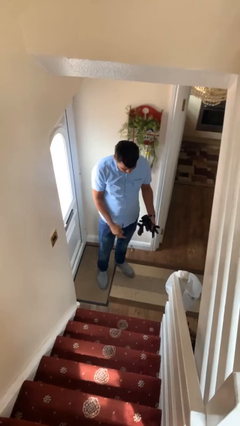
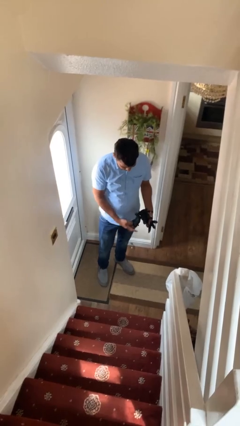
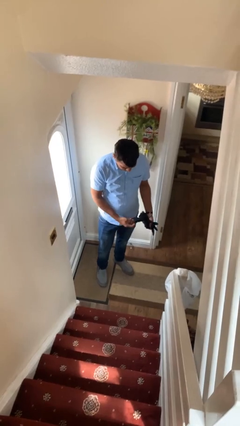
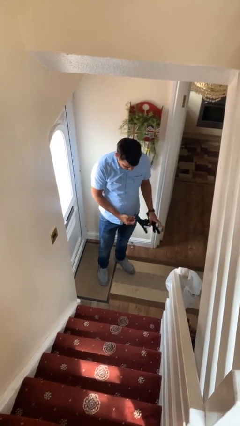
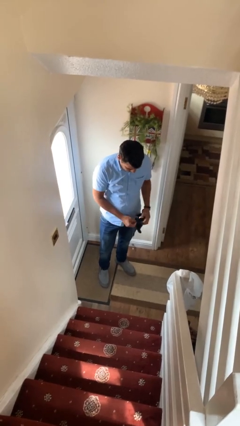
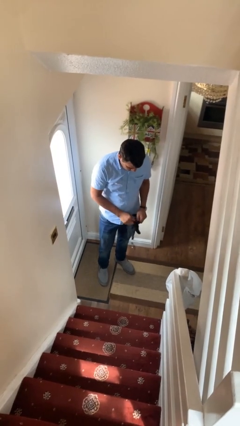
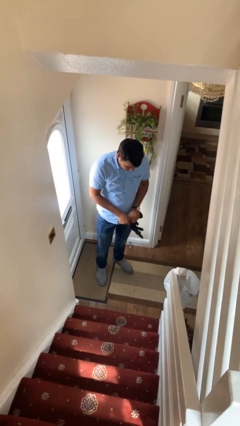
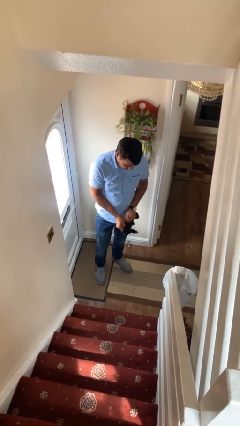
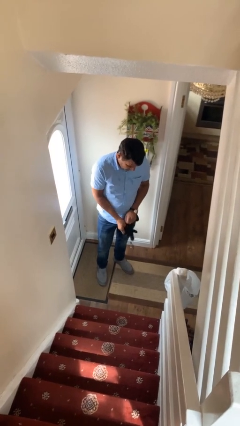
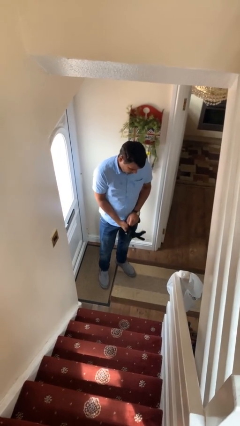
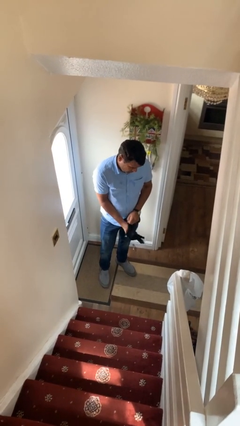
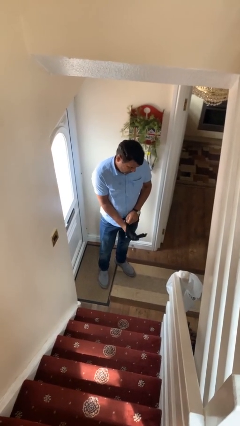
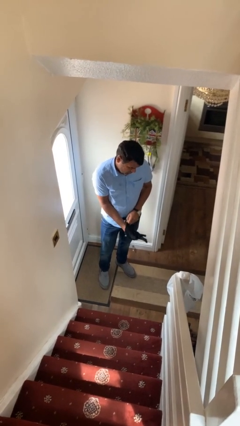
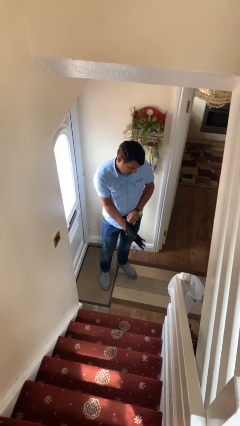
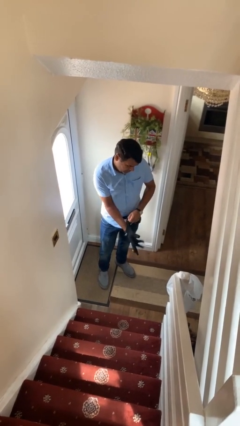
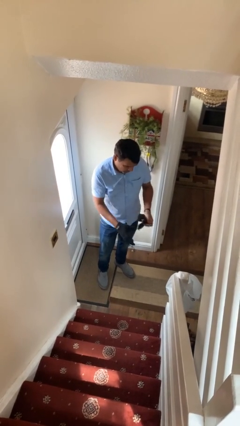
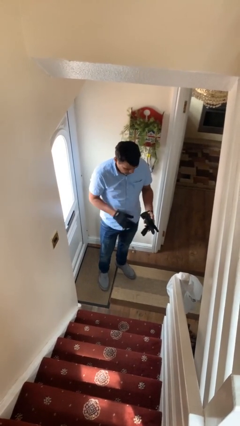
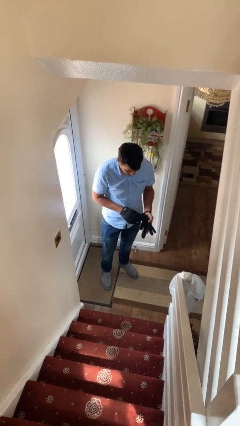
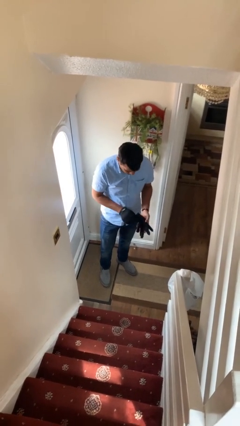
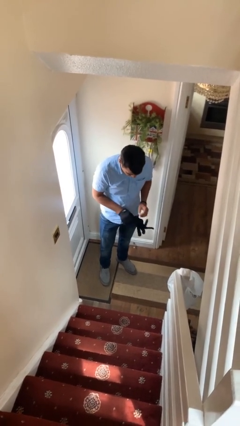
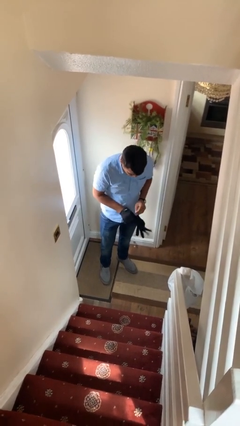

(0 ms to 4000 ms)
person puts on gloves

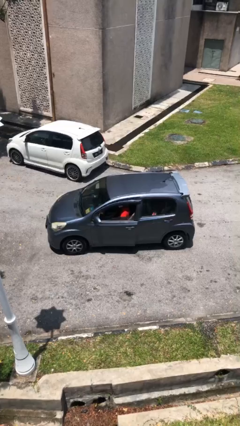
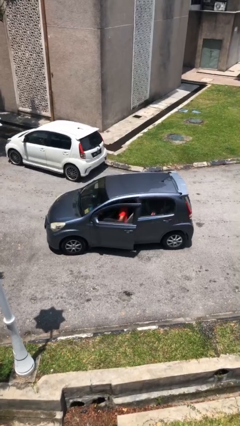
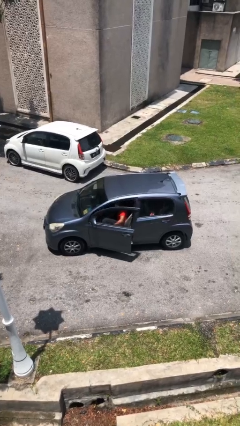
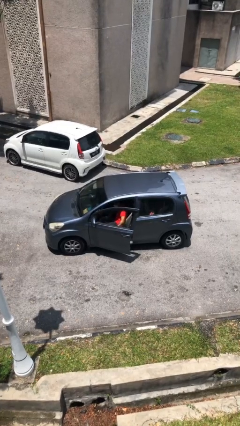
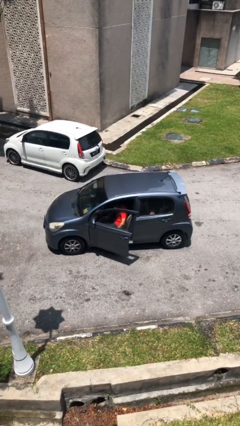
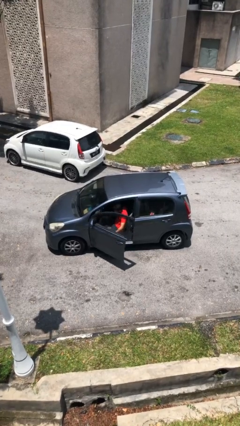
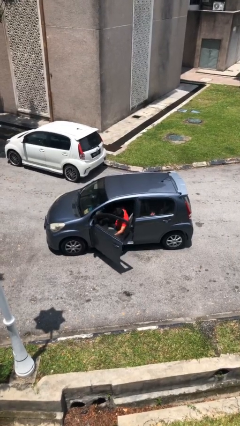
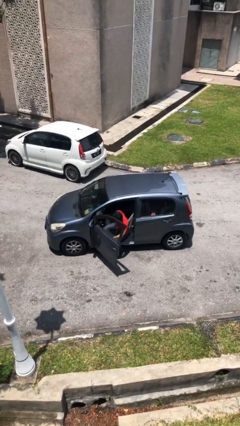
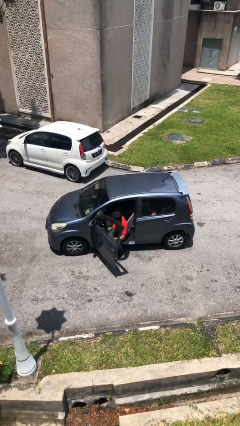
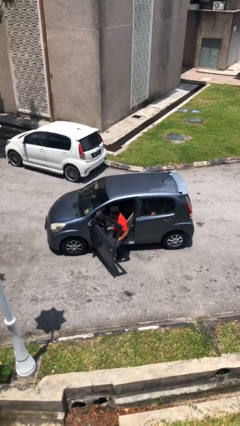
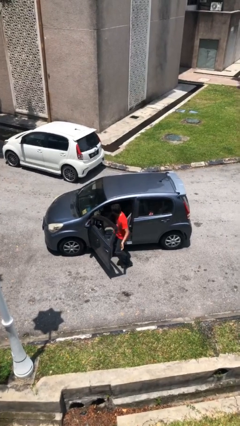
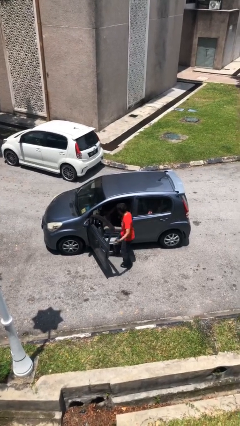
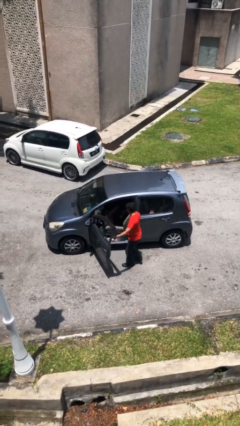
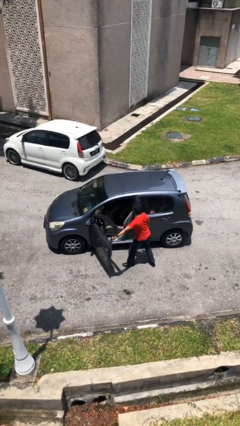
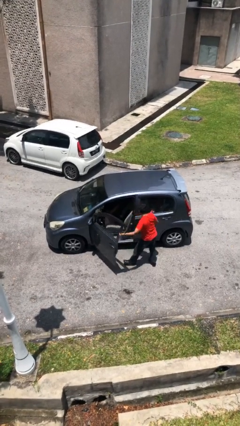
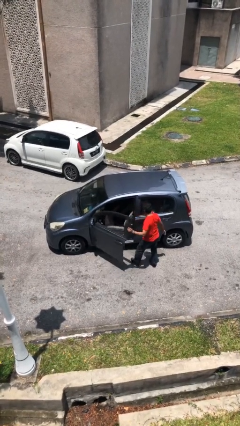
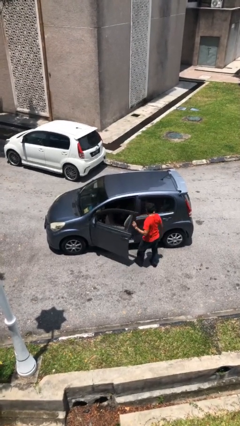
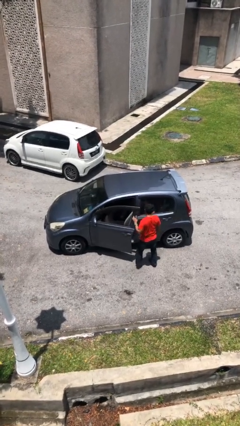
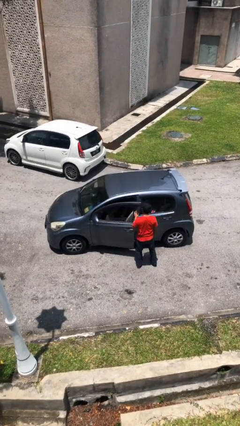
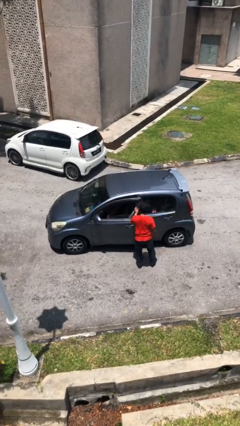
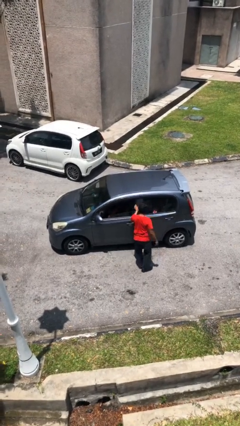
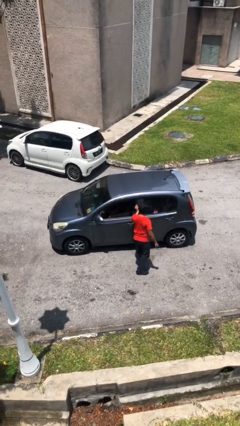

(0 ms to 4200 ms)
car drops off person

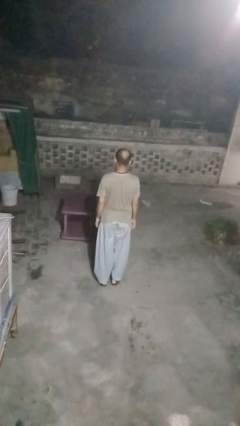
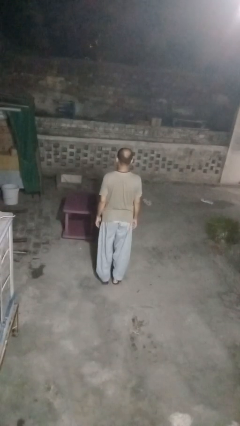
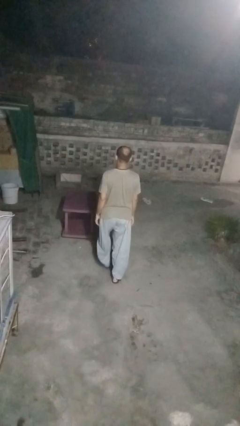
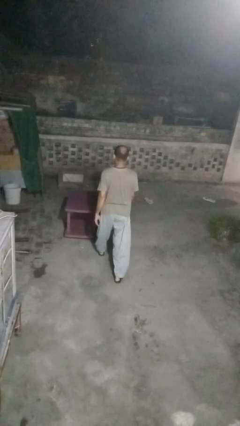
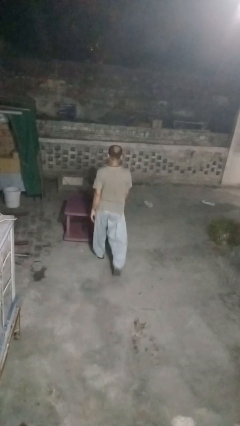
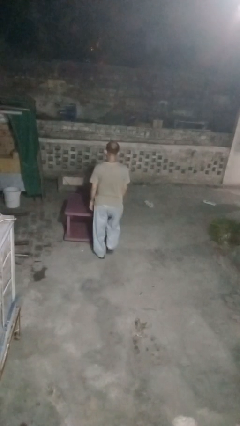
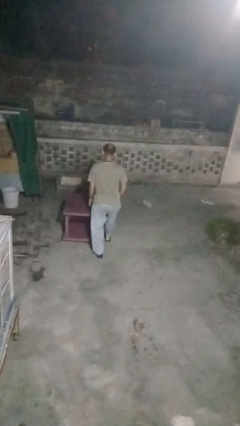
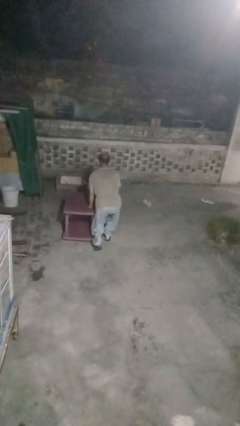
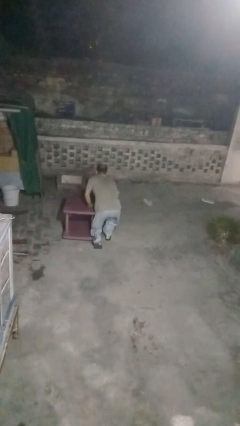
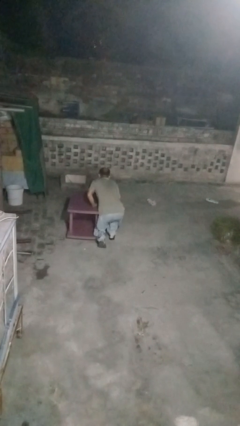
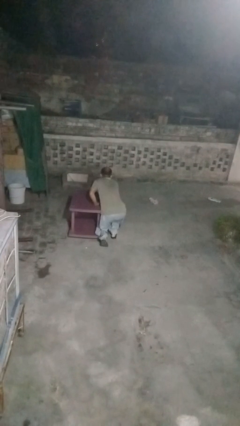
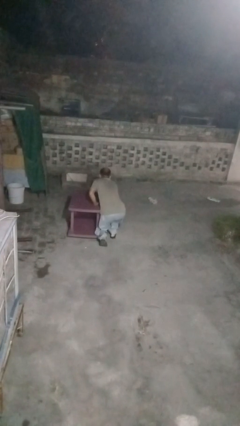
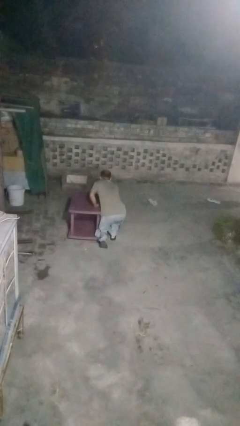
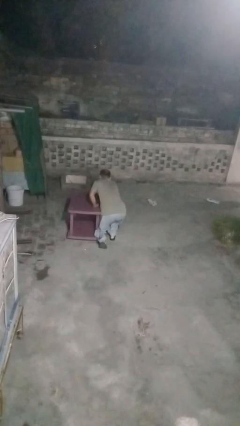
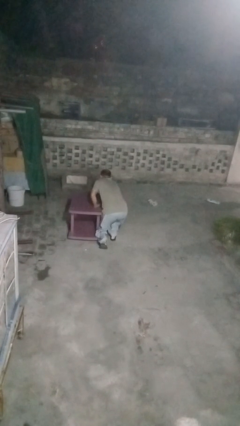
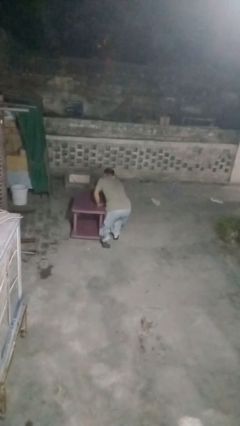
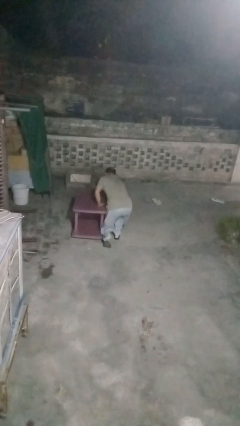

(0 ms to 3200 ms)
person bumps into table

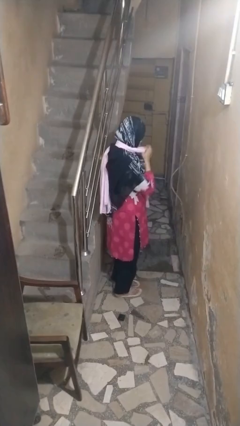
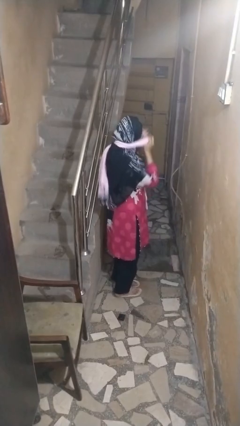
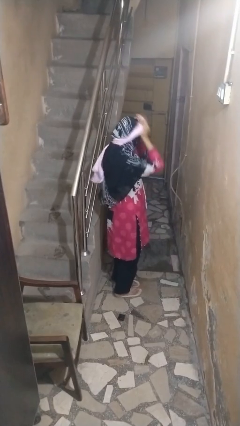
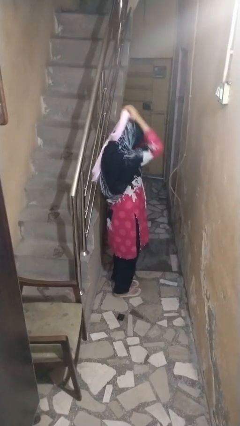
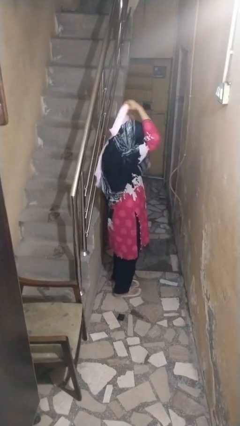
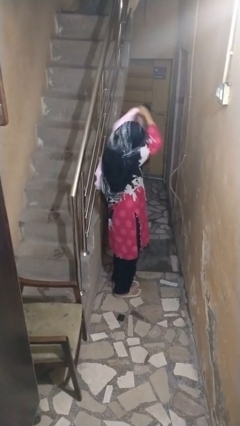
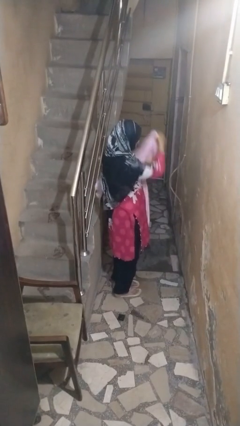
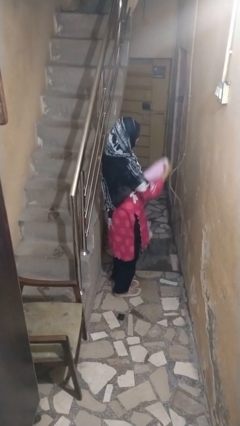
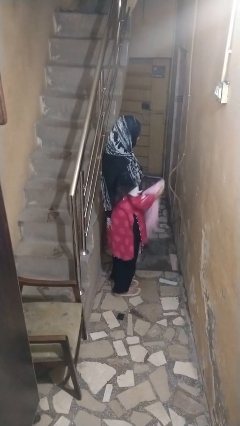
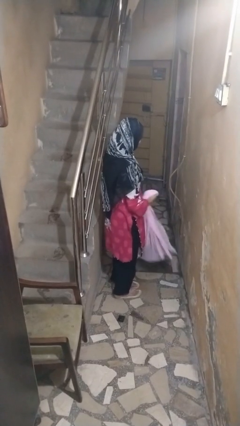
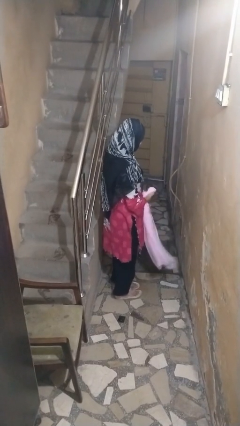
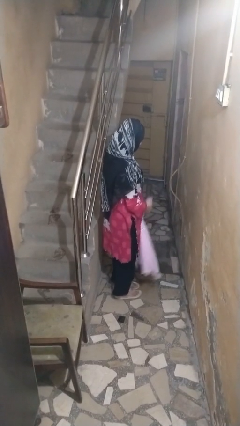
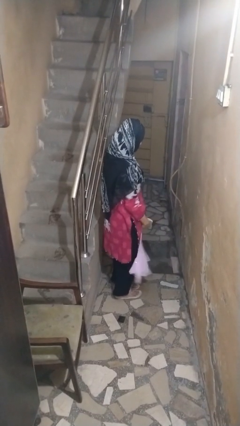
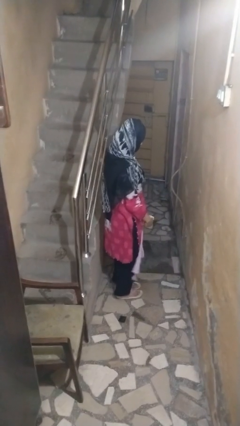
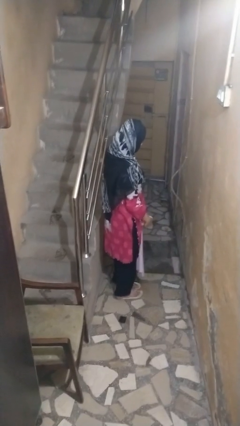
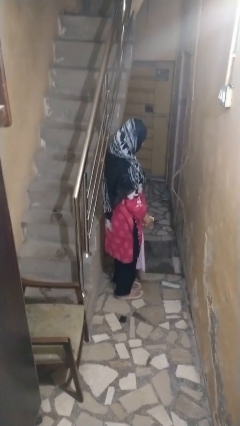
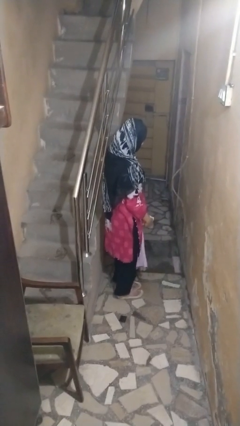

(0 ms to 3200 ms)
person takes off scarf

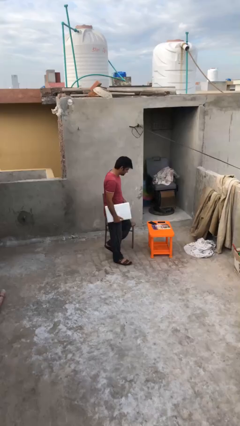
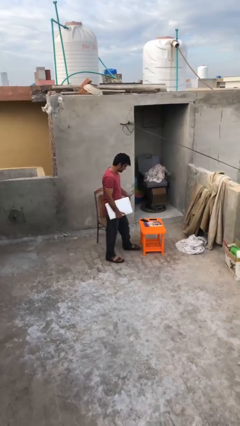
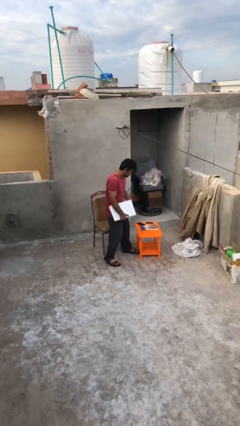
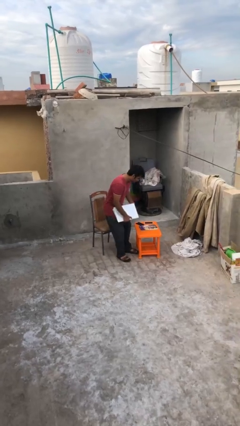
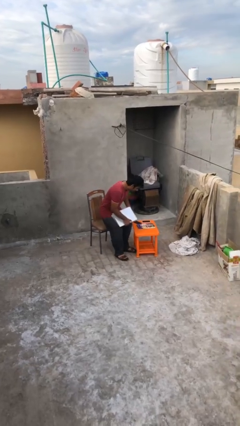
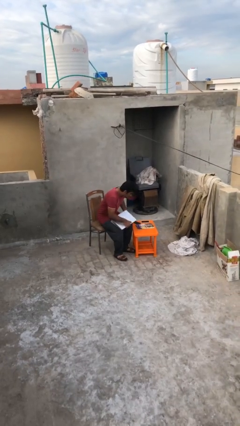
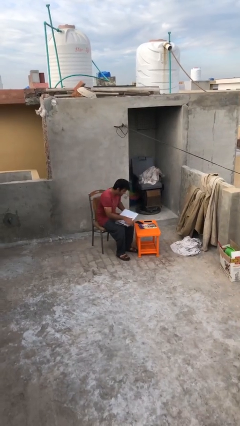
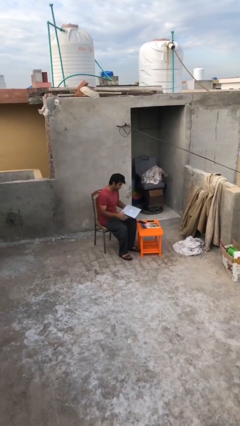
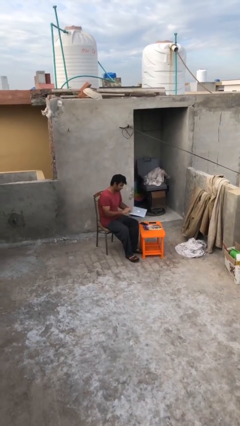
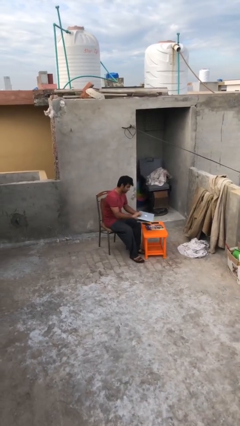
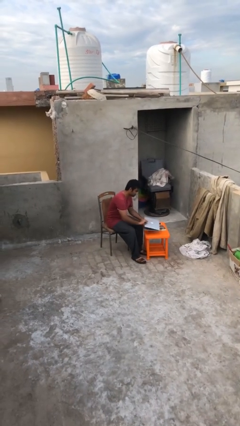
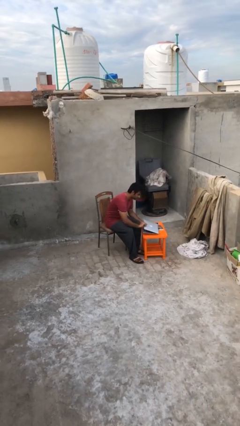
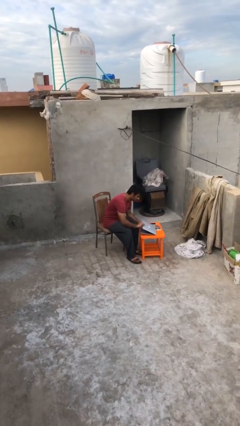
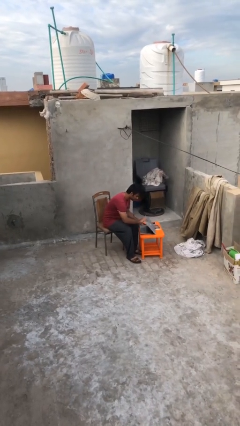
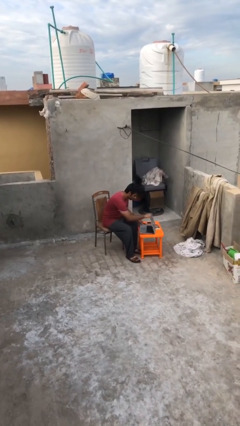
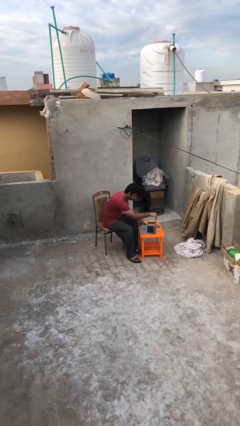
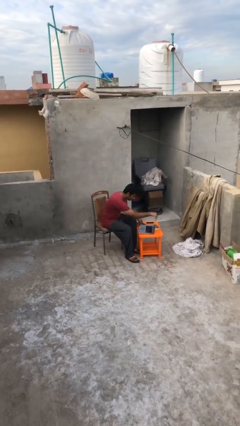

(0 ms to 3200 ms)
person sits down
